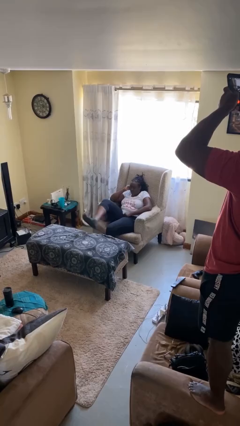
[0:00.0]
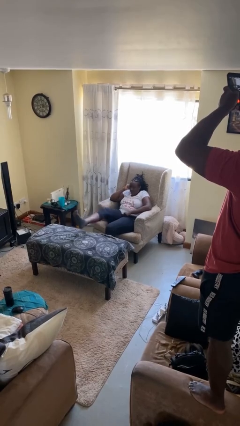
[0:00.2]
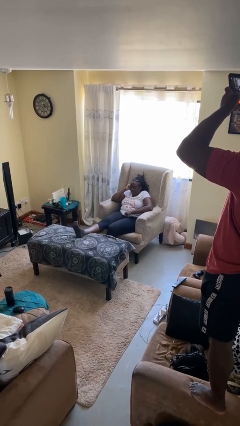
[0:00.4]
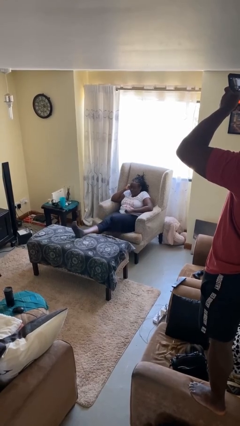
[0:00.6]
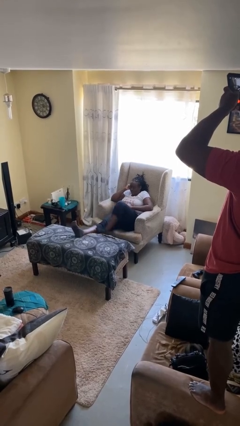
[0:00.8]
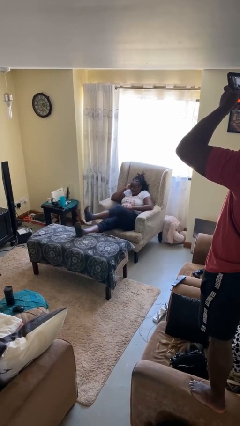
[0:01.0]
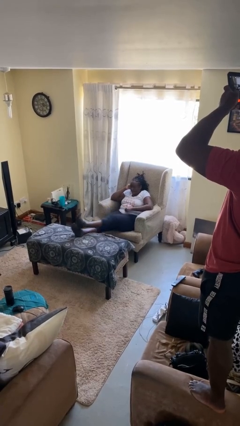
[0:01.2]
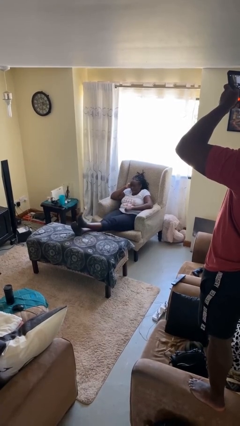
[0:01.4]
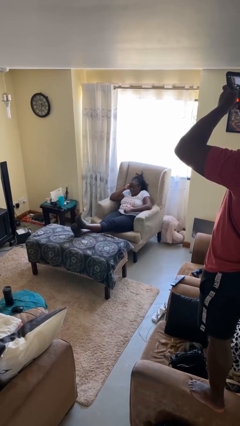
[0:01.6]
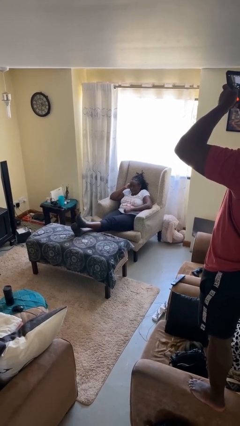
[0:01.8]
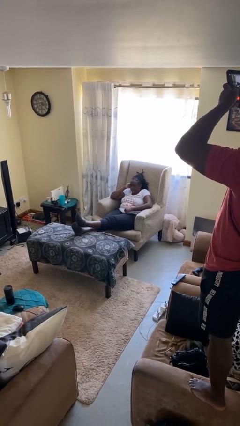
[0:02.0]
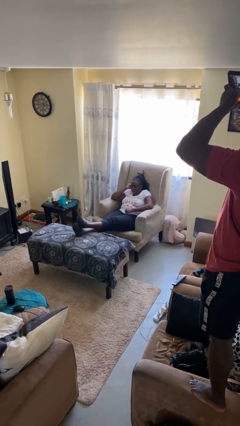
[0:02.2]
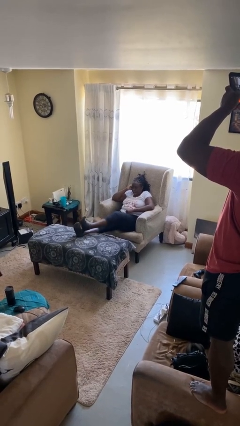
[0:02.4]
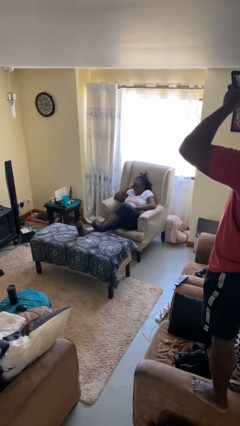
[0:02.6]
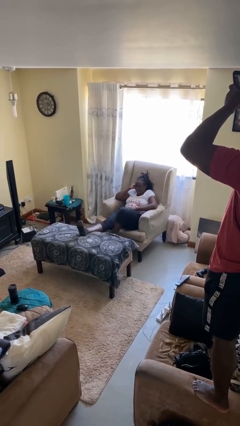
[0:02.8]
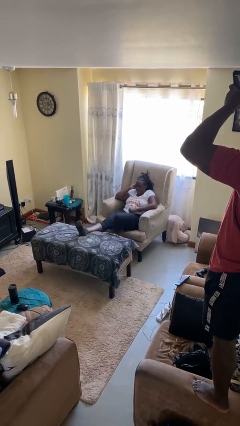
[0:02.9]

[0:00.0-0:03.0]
person puts feet up

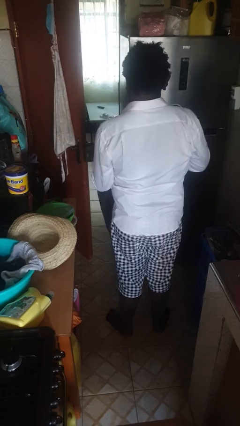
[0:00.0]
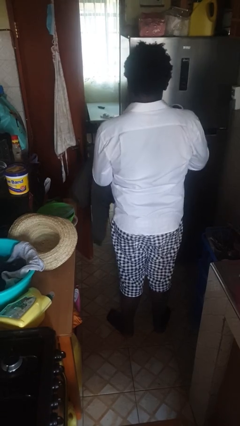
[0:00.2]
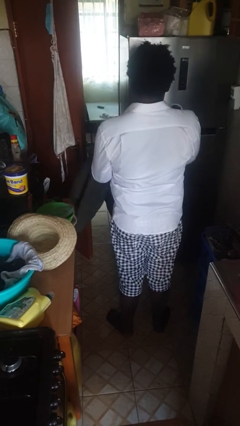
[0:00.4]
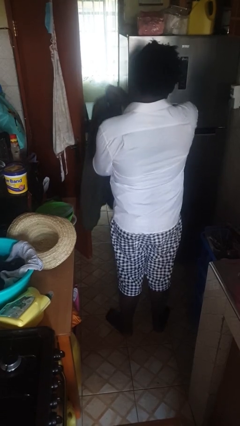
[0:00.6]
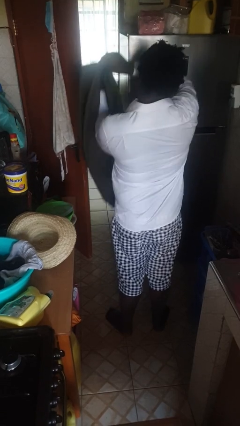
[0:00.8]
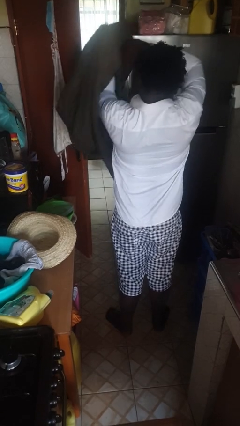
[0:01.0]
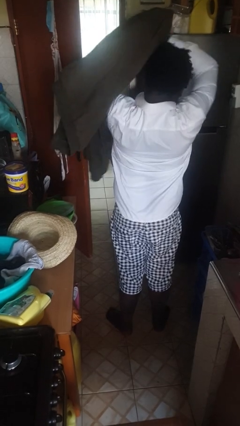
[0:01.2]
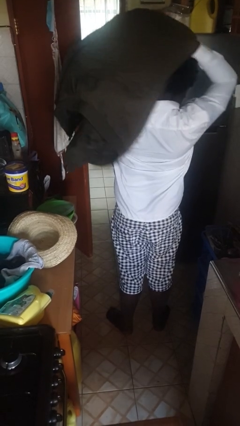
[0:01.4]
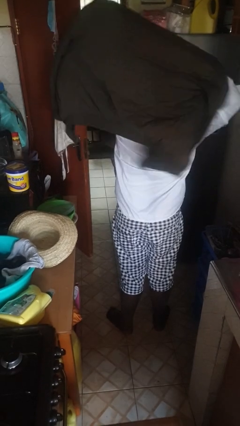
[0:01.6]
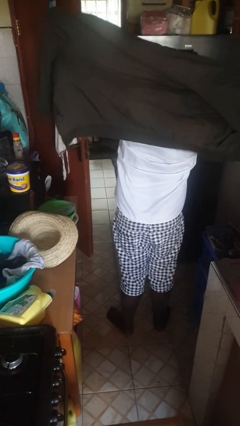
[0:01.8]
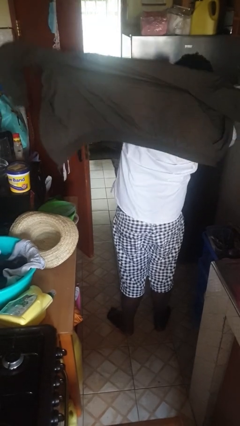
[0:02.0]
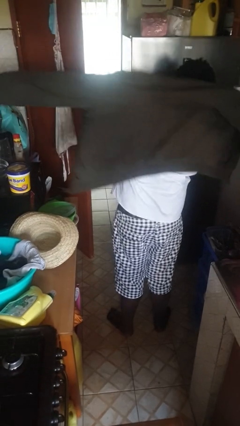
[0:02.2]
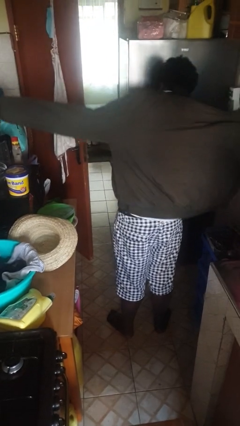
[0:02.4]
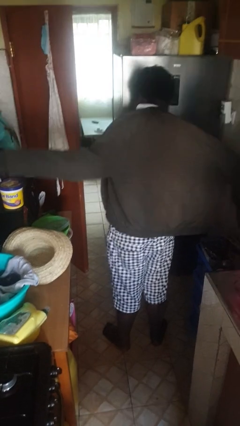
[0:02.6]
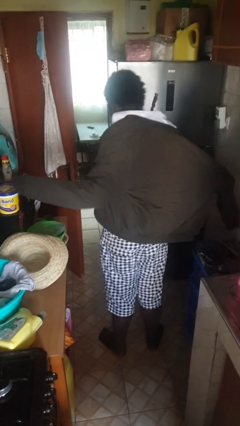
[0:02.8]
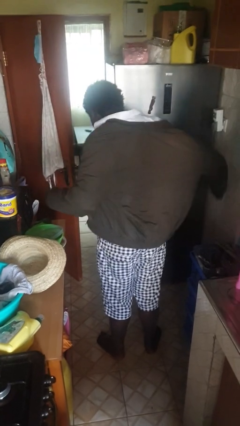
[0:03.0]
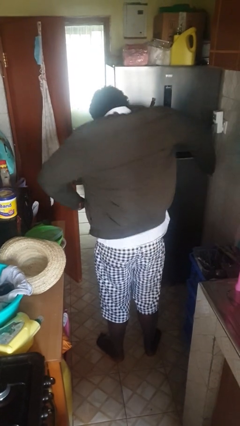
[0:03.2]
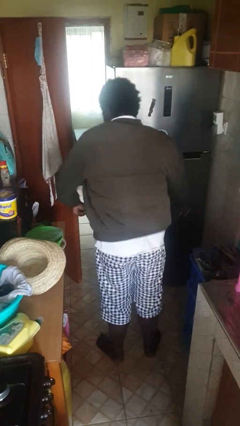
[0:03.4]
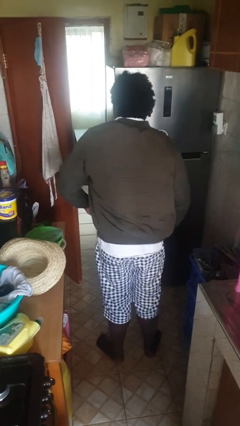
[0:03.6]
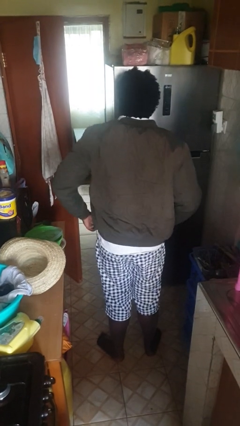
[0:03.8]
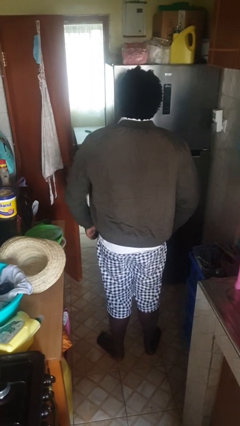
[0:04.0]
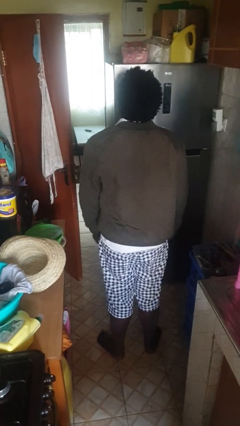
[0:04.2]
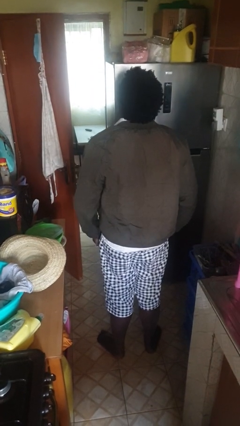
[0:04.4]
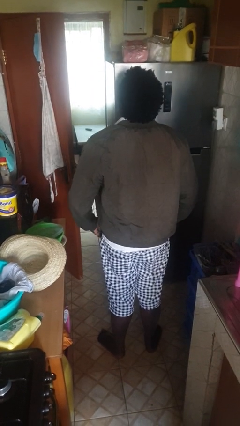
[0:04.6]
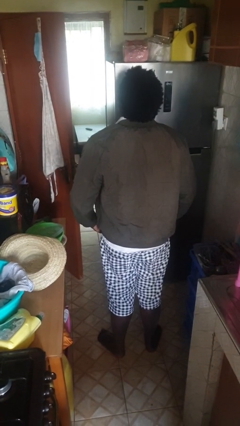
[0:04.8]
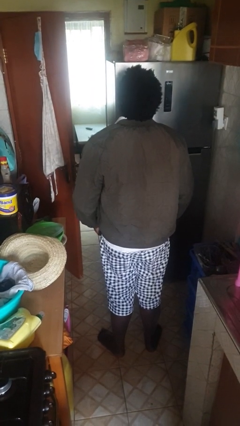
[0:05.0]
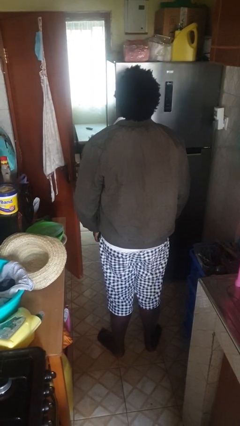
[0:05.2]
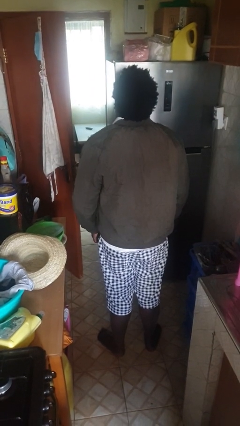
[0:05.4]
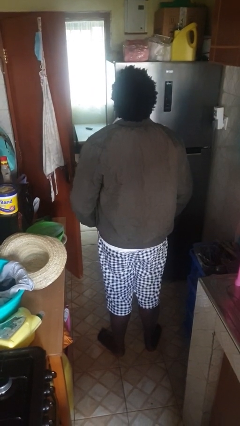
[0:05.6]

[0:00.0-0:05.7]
person puts on jacket

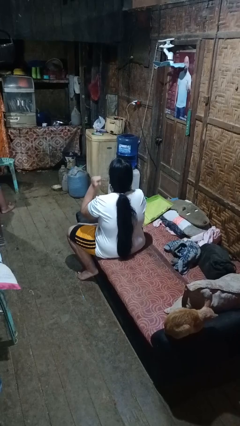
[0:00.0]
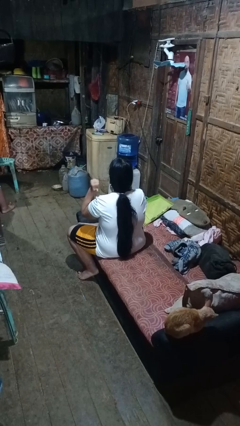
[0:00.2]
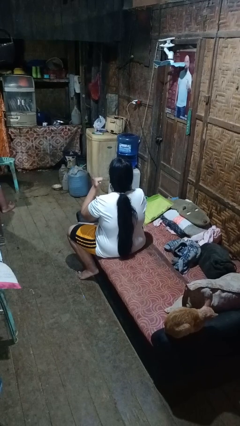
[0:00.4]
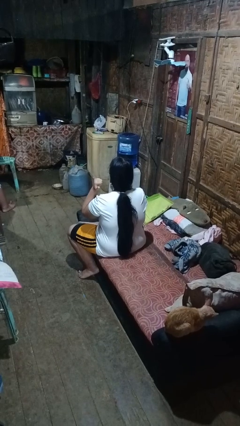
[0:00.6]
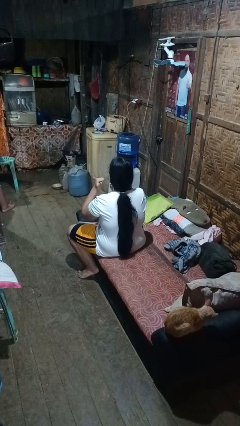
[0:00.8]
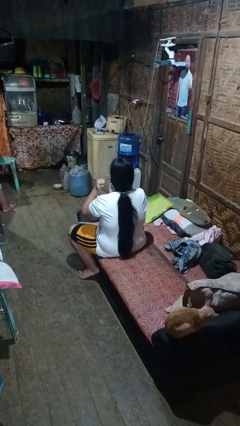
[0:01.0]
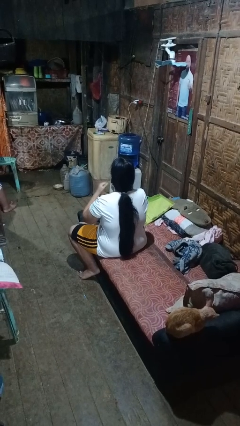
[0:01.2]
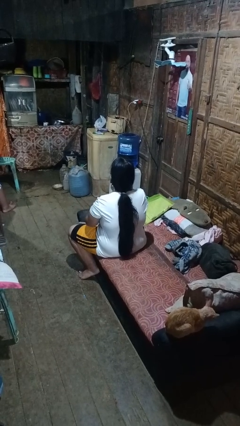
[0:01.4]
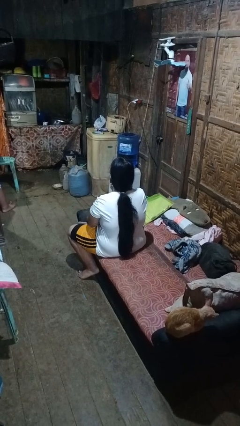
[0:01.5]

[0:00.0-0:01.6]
person gestures behind me

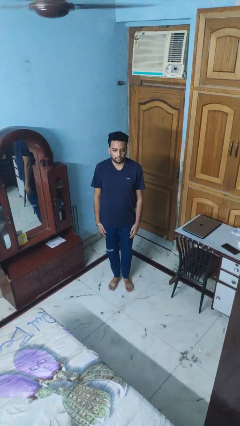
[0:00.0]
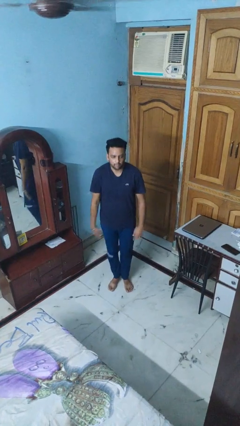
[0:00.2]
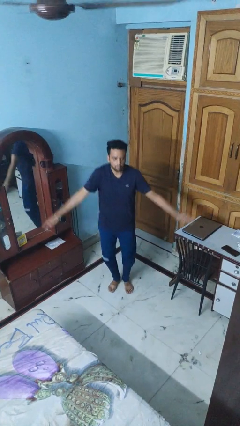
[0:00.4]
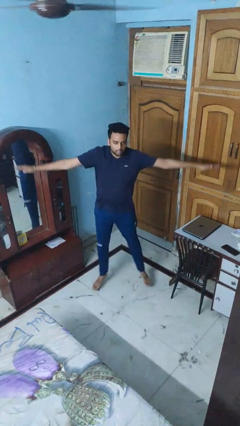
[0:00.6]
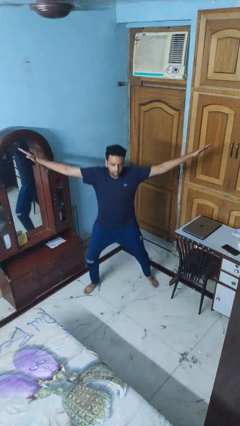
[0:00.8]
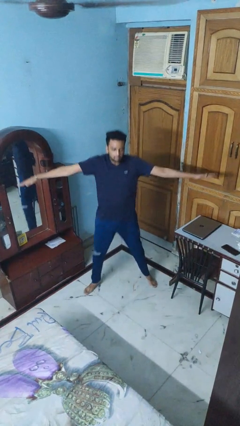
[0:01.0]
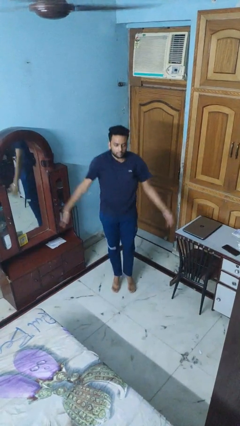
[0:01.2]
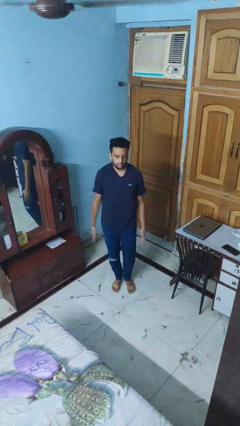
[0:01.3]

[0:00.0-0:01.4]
person exercises with jumping jacks

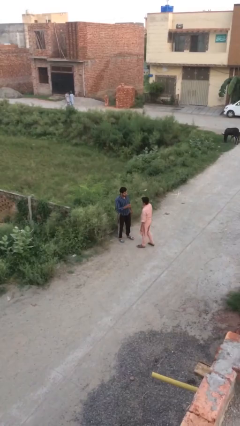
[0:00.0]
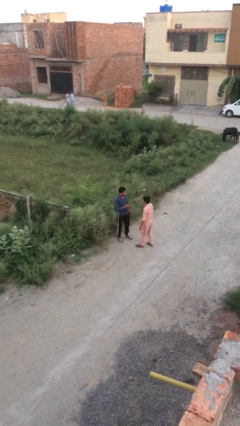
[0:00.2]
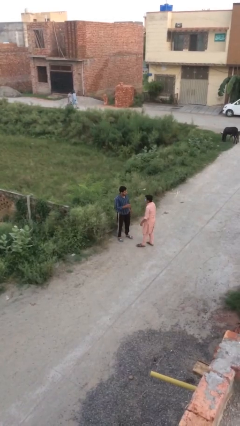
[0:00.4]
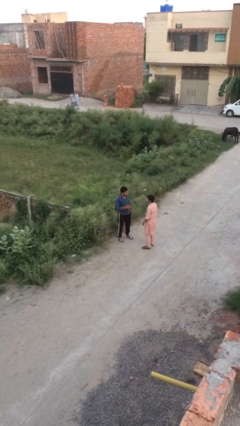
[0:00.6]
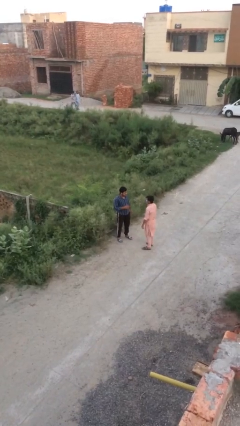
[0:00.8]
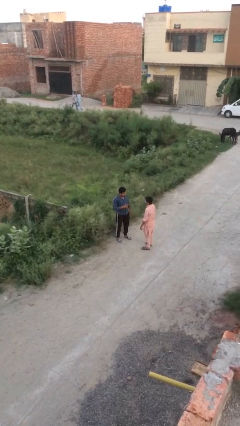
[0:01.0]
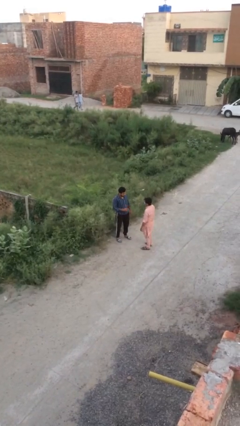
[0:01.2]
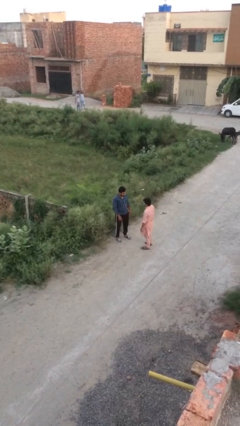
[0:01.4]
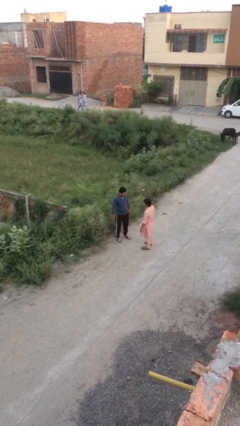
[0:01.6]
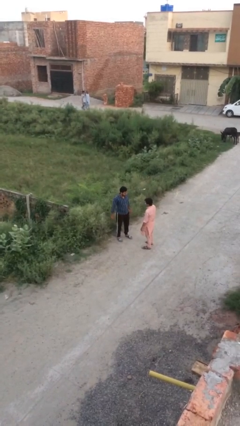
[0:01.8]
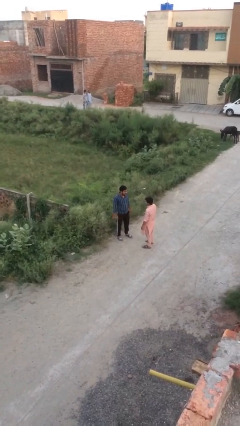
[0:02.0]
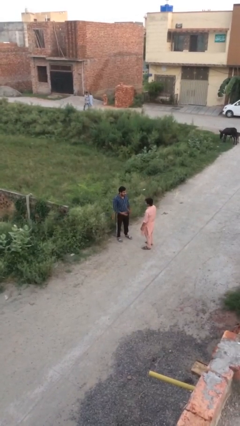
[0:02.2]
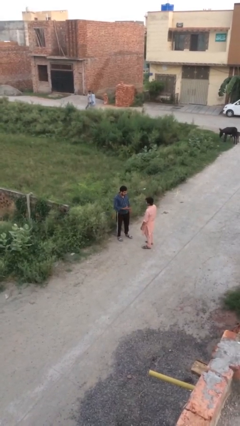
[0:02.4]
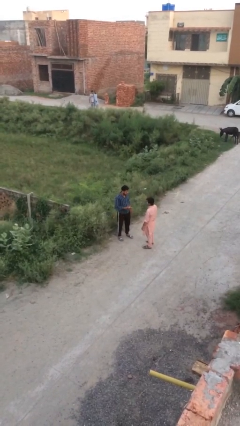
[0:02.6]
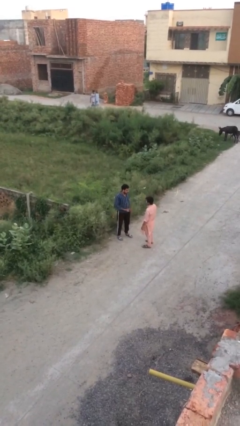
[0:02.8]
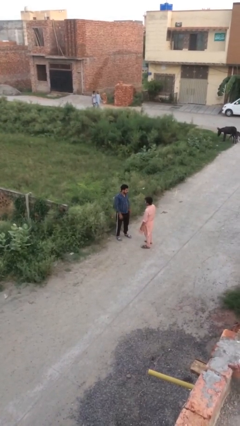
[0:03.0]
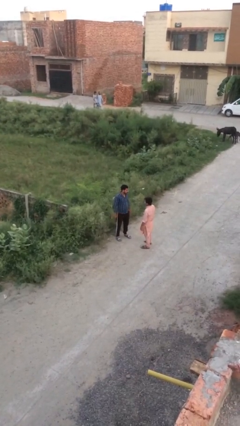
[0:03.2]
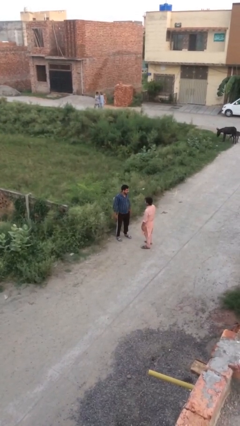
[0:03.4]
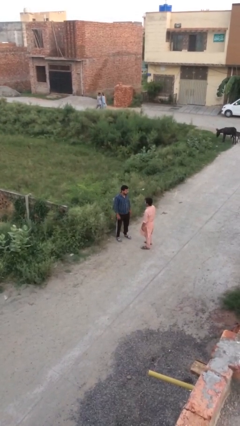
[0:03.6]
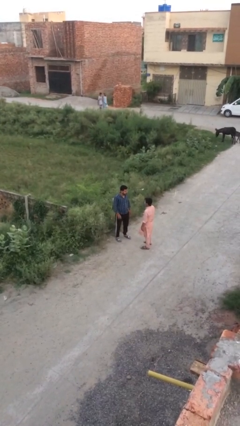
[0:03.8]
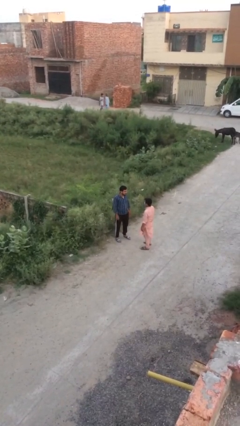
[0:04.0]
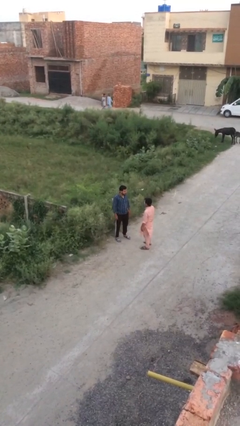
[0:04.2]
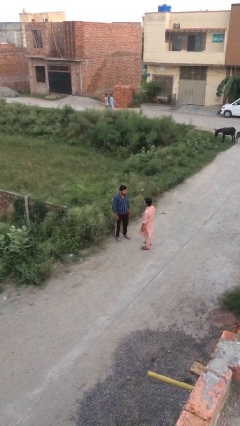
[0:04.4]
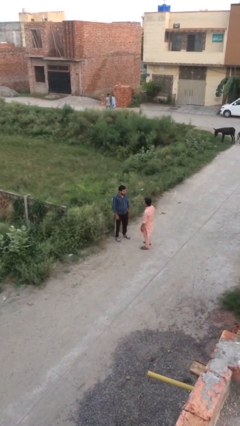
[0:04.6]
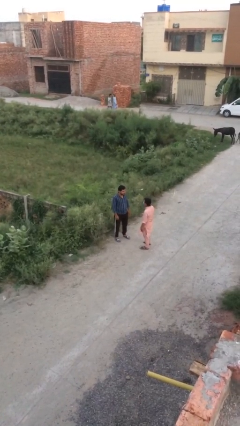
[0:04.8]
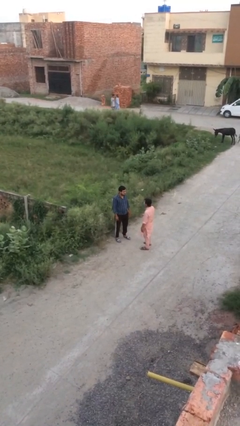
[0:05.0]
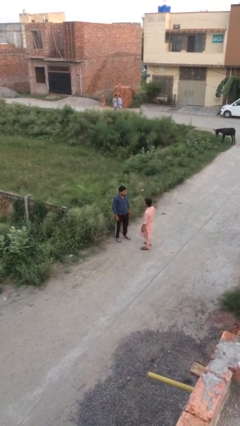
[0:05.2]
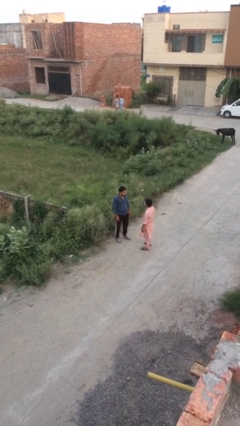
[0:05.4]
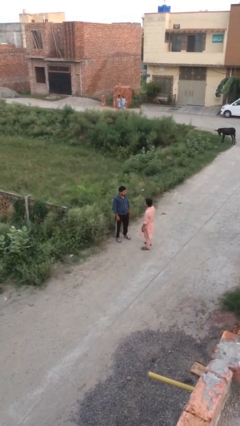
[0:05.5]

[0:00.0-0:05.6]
person talks to person
